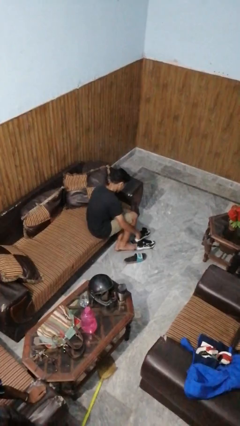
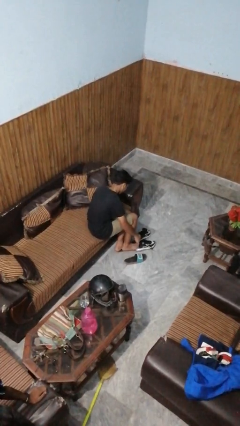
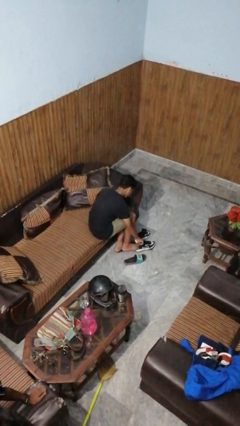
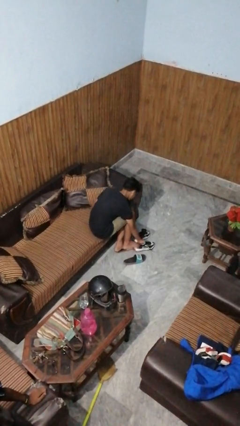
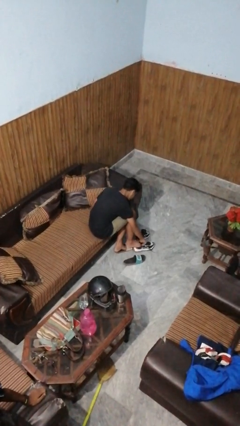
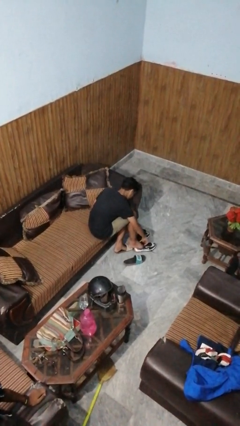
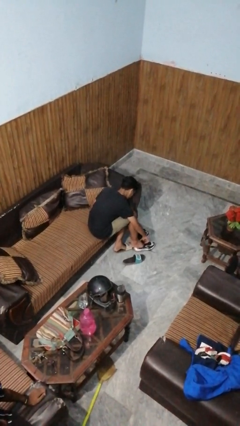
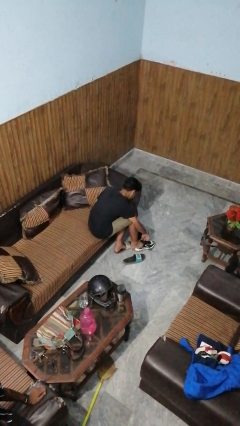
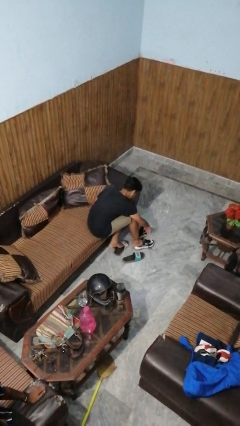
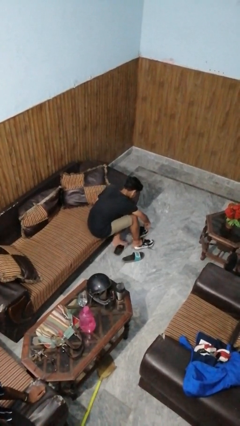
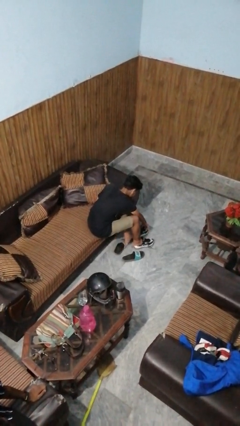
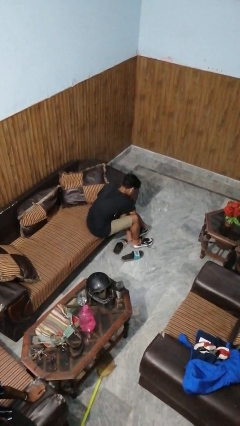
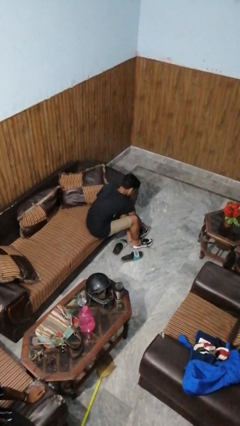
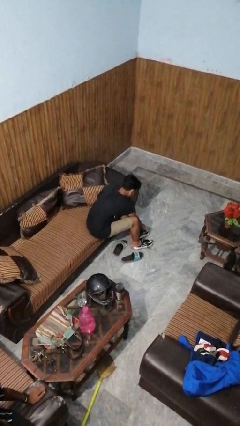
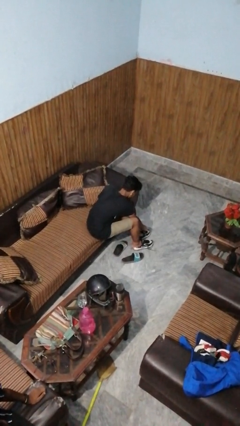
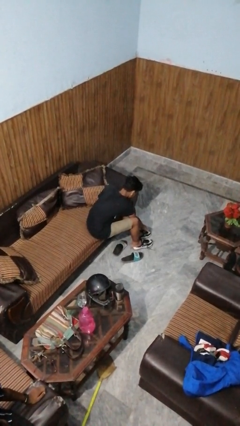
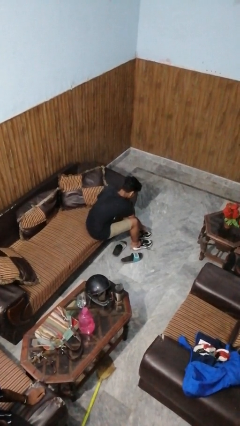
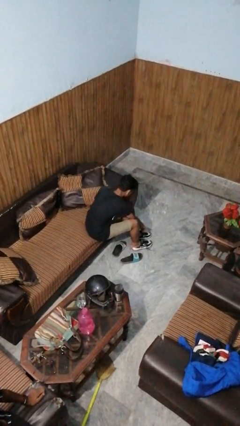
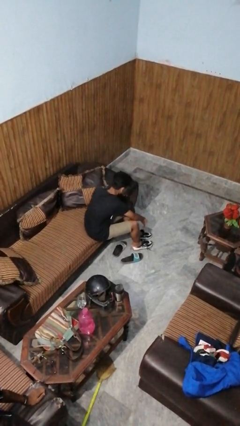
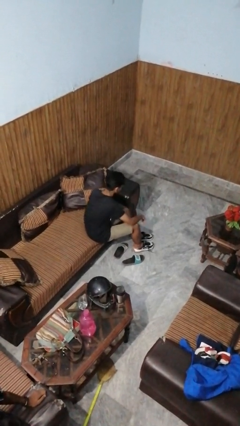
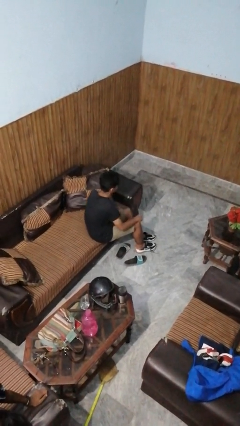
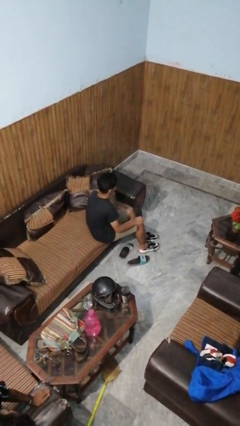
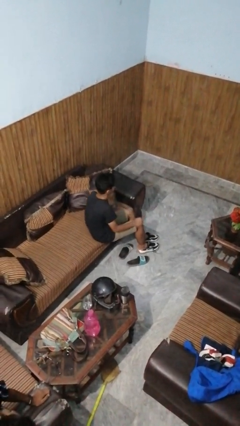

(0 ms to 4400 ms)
person puts on shoes

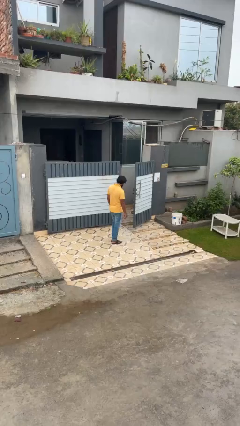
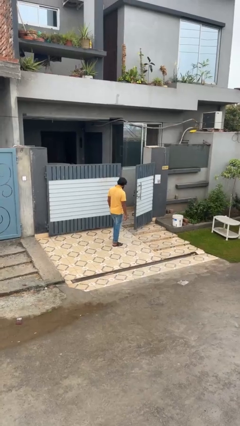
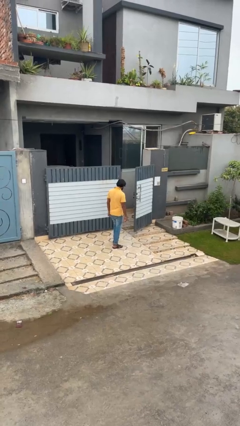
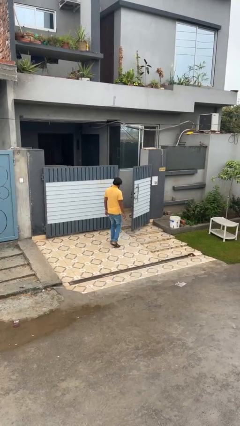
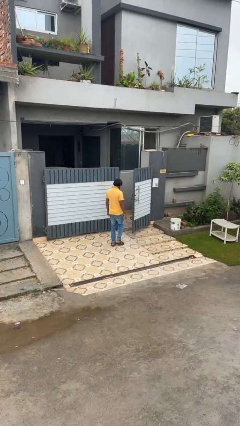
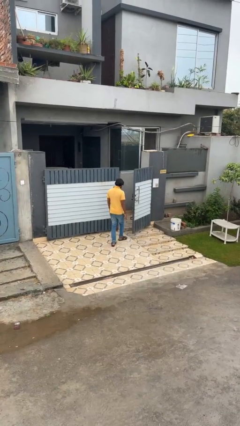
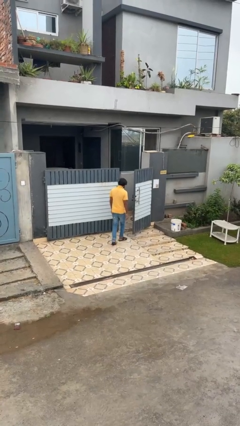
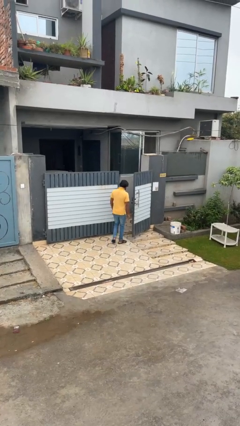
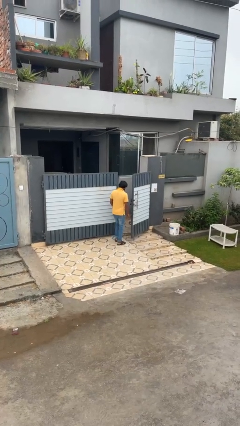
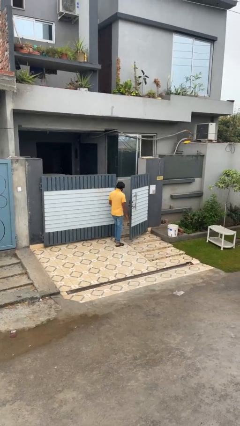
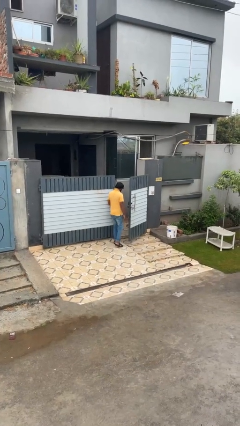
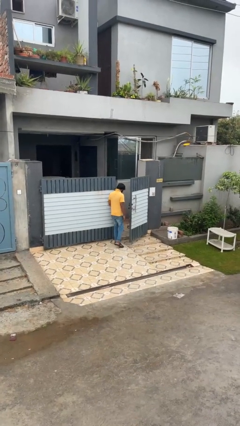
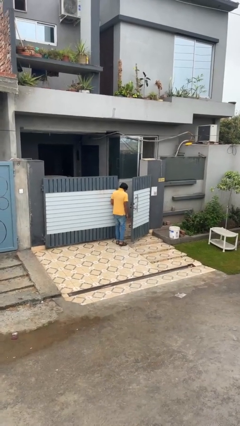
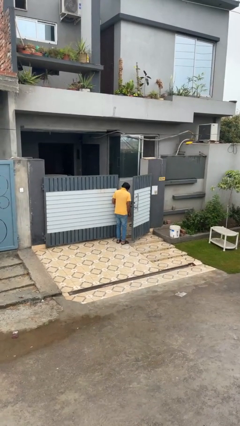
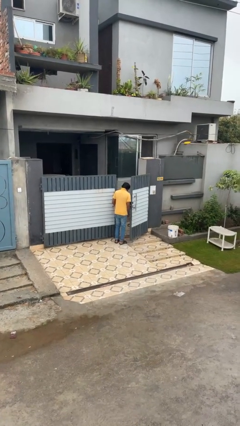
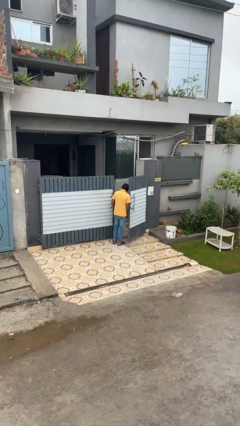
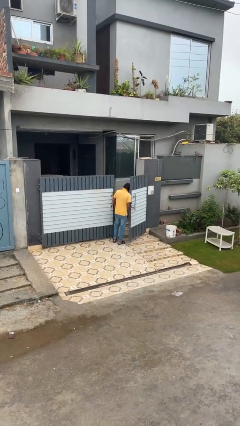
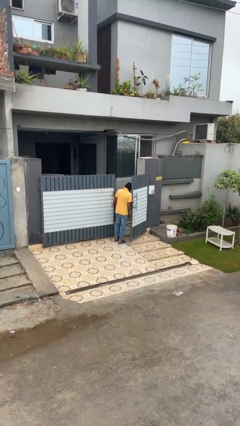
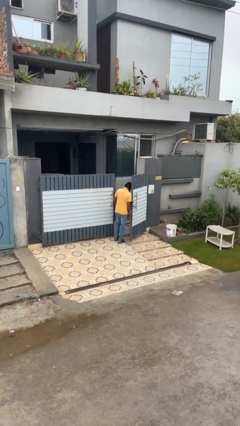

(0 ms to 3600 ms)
person bumps into wall

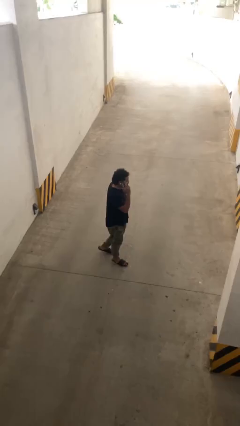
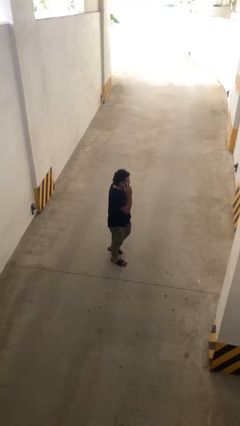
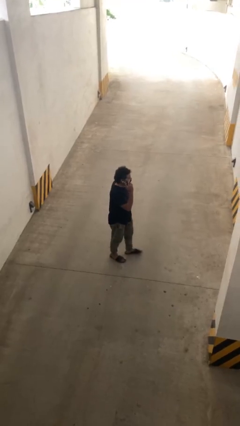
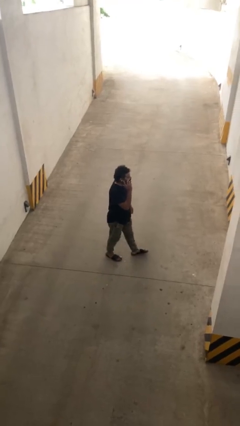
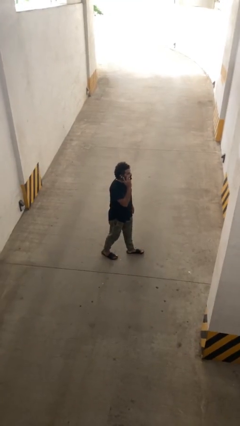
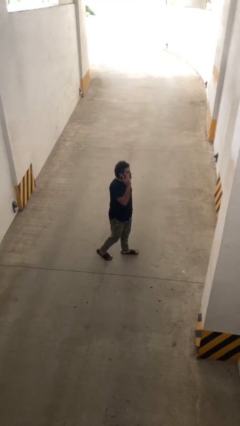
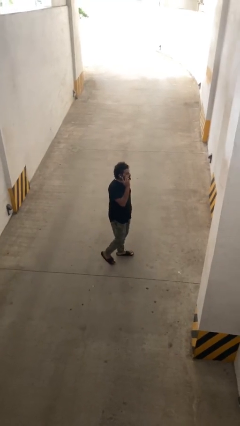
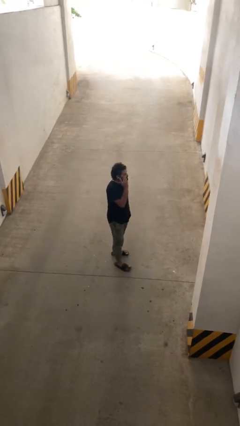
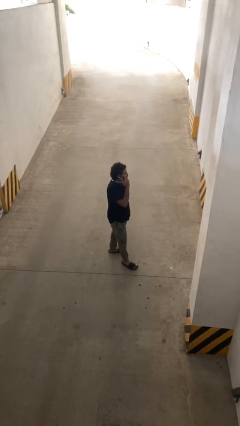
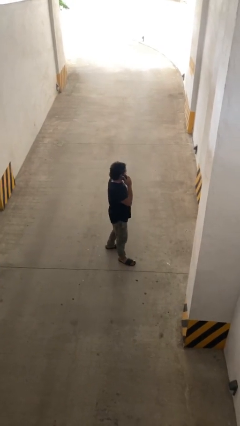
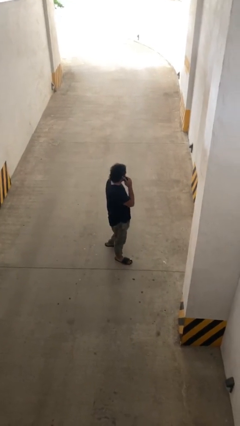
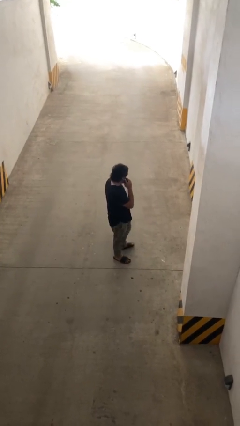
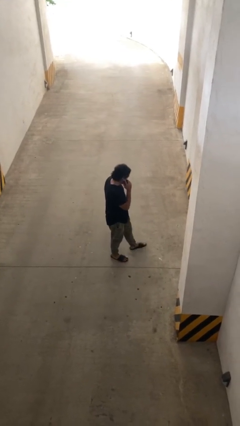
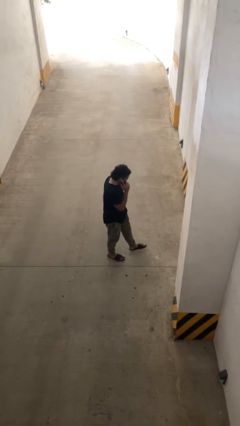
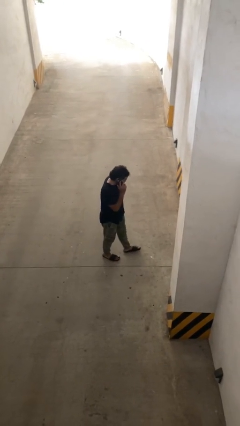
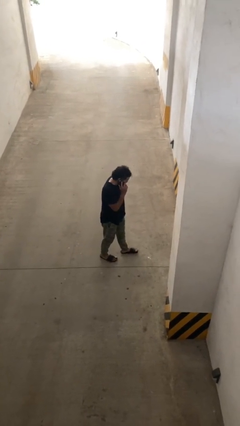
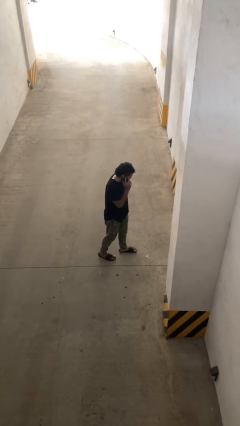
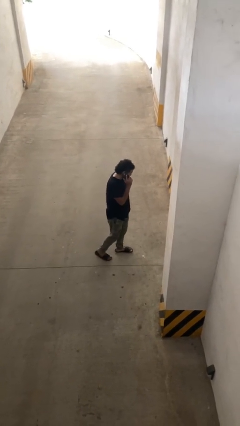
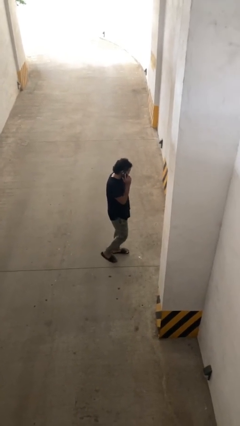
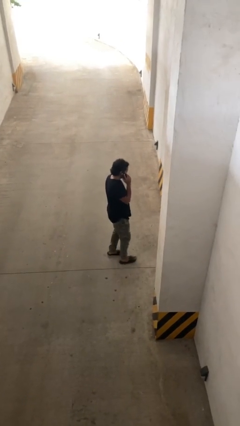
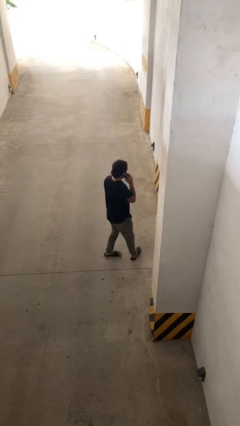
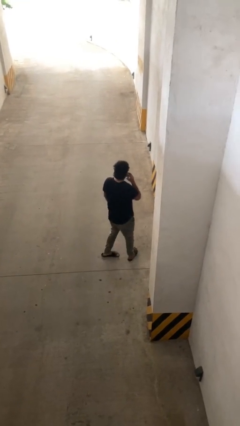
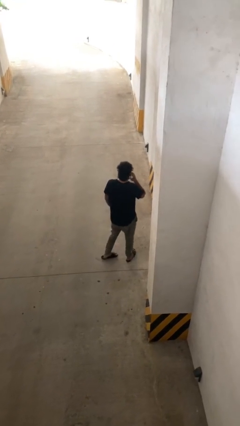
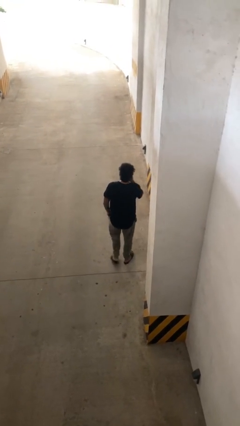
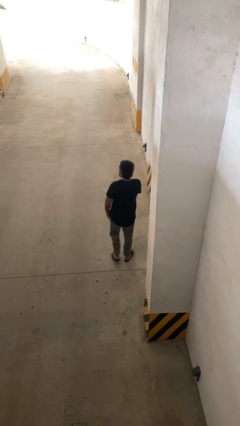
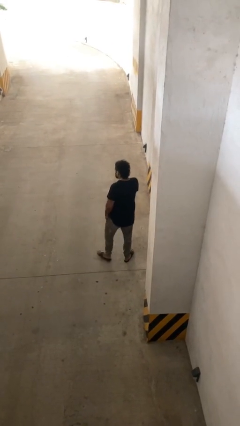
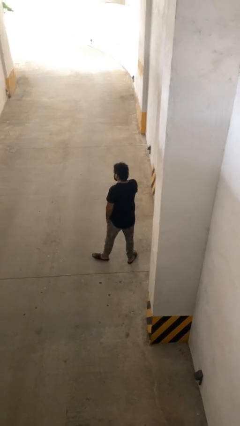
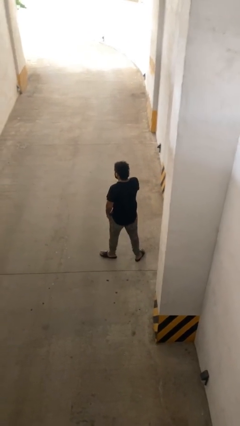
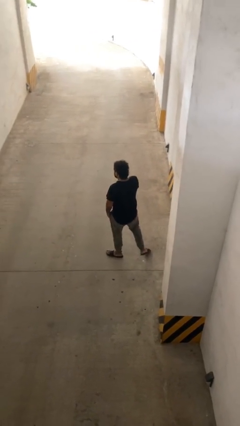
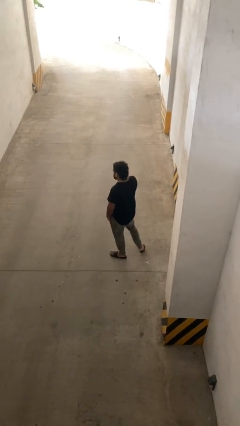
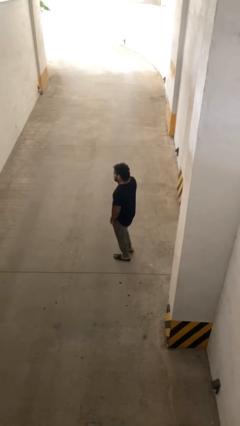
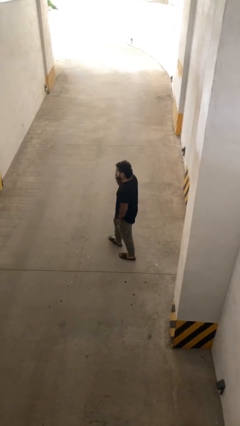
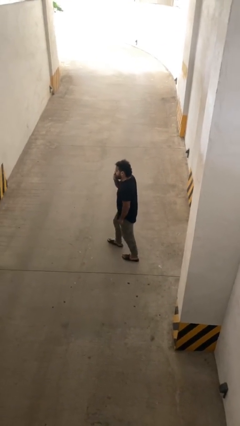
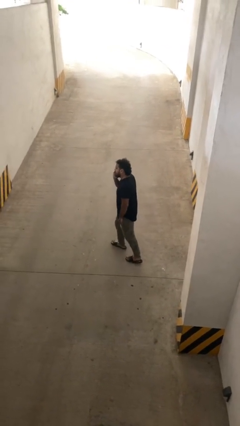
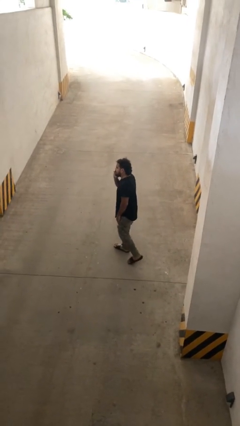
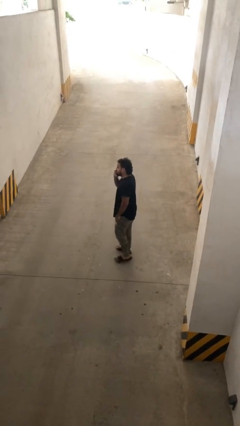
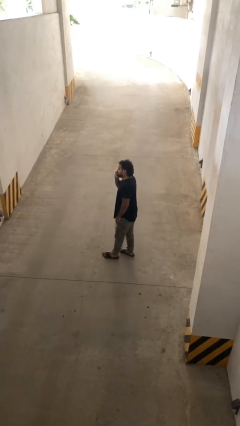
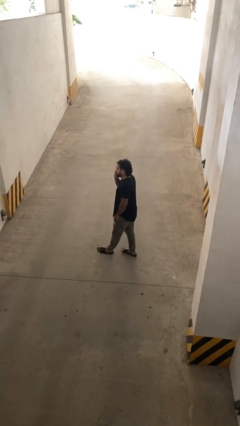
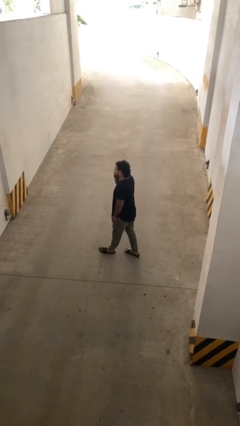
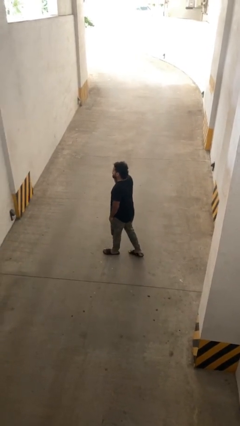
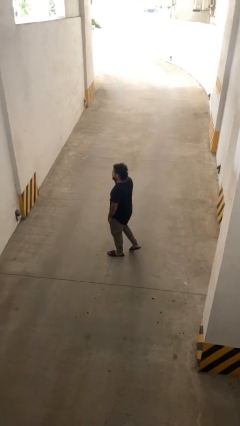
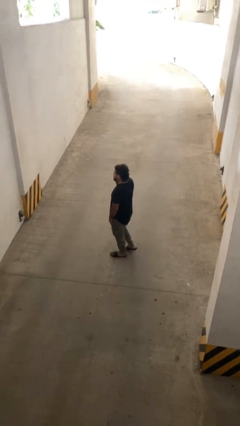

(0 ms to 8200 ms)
person talks on phone

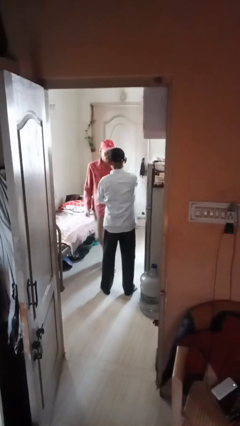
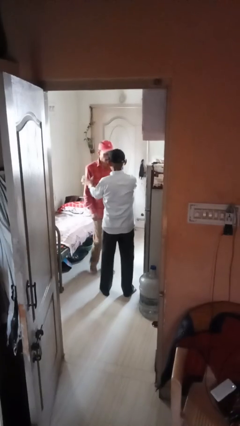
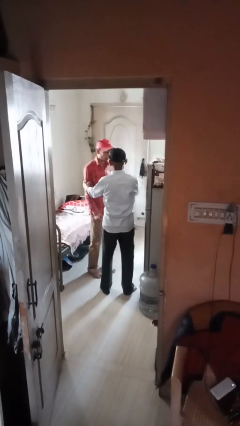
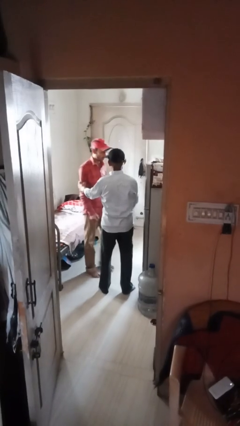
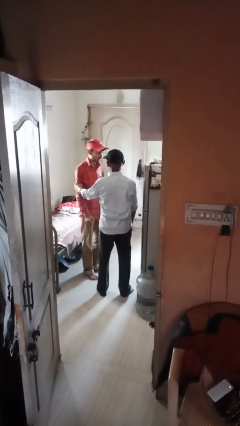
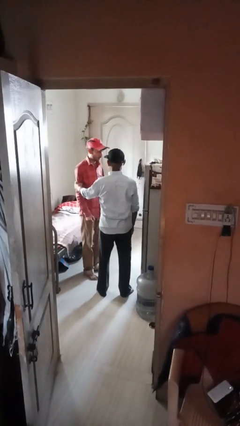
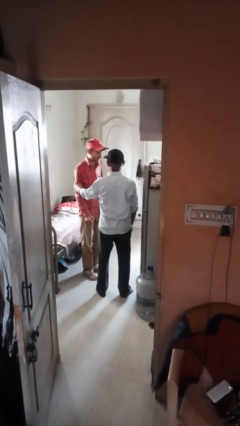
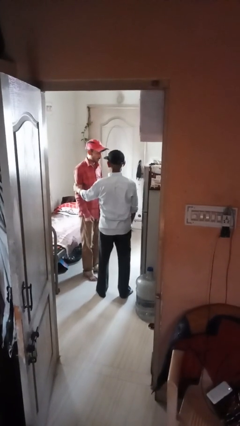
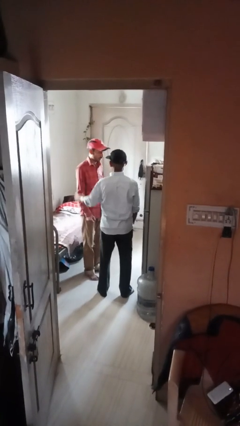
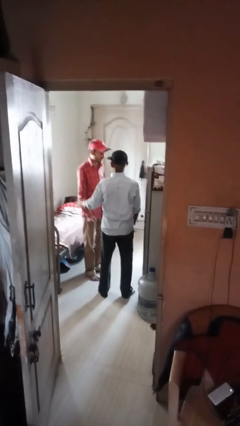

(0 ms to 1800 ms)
person grabs person by shoulder
